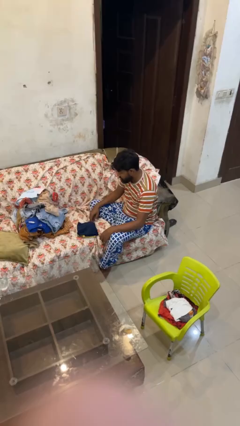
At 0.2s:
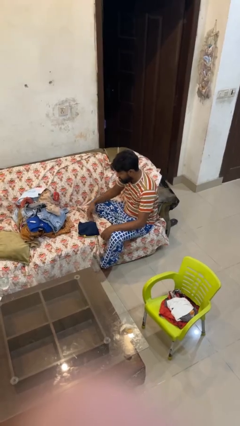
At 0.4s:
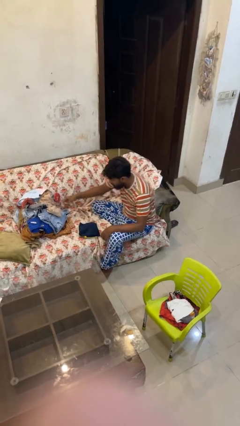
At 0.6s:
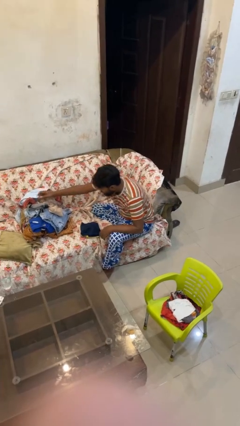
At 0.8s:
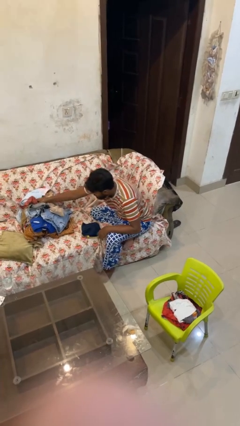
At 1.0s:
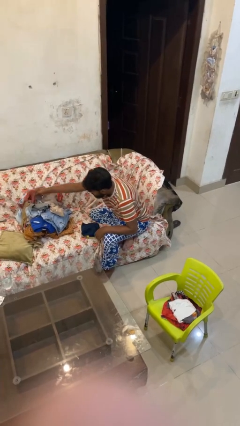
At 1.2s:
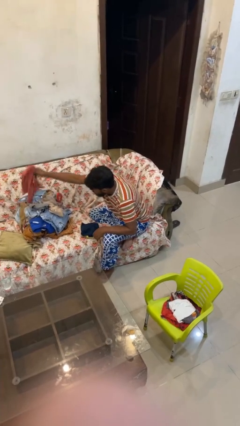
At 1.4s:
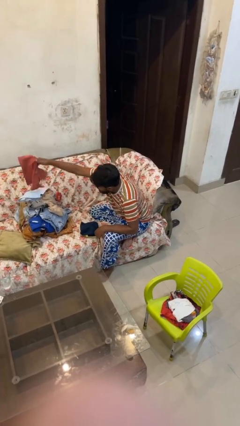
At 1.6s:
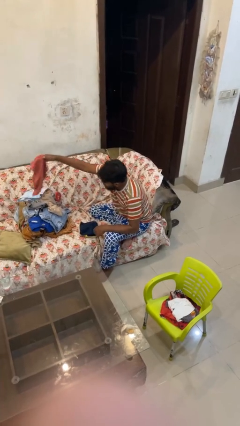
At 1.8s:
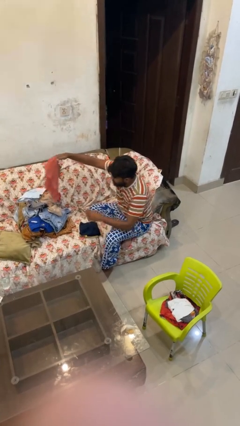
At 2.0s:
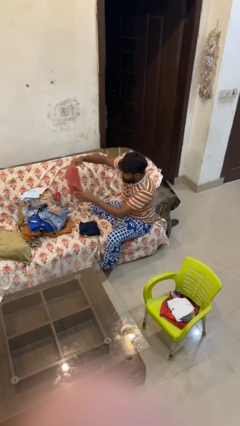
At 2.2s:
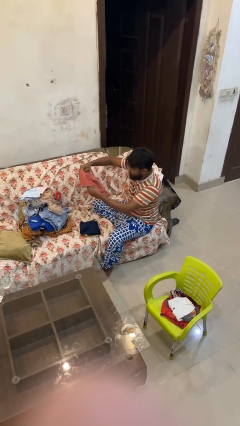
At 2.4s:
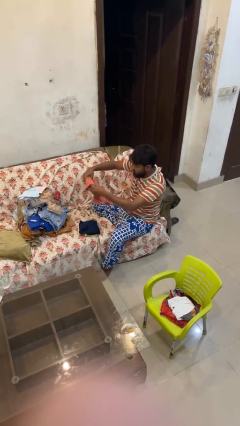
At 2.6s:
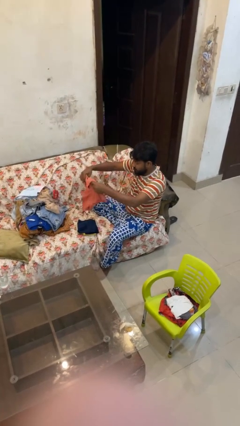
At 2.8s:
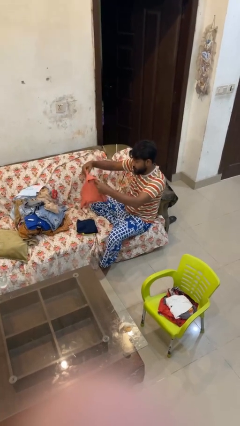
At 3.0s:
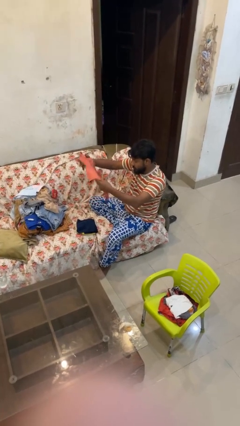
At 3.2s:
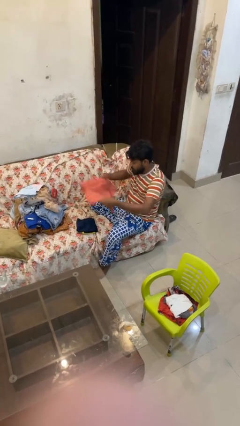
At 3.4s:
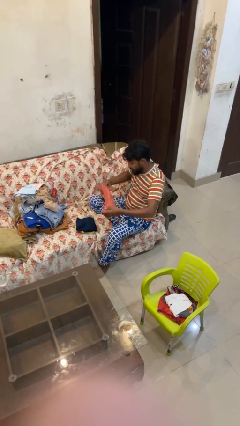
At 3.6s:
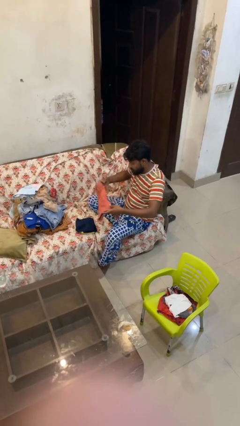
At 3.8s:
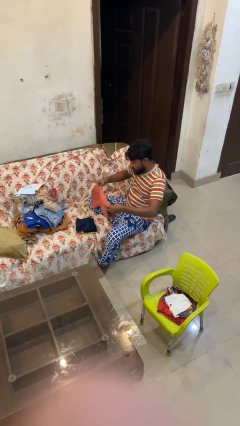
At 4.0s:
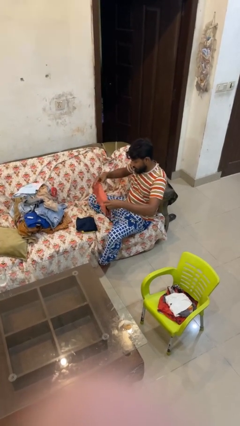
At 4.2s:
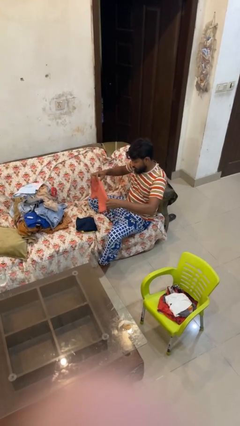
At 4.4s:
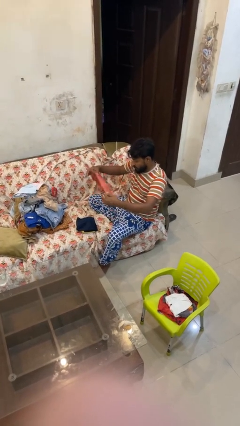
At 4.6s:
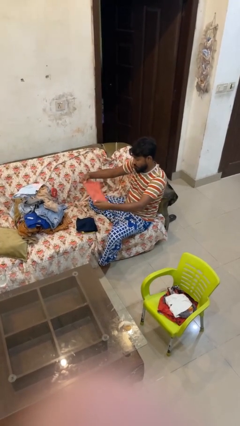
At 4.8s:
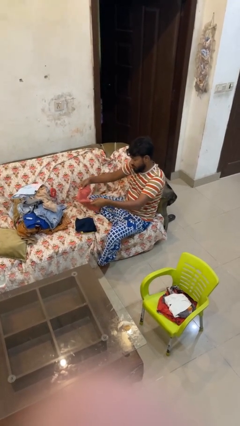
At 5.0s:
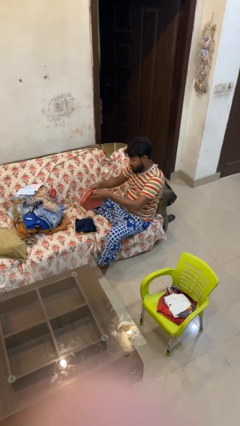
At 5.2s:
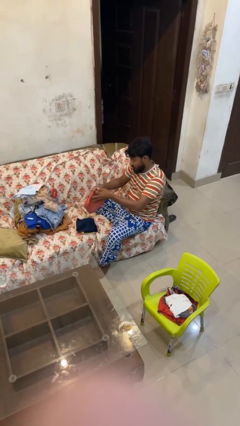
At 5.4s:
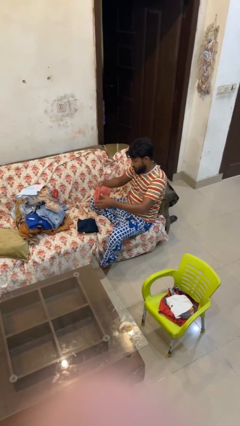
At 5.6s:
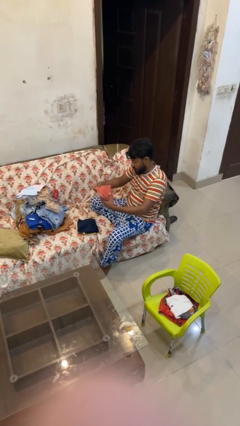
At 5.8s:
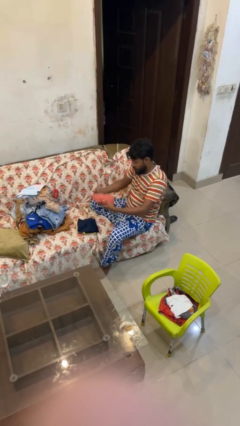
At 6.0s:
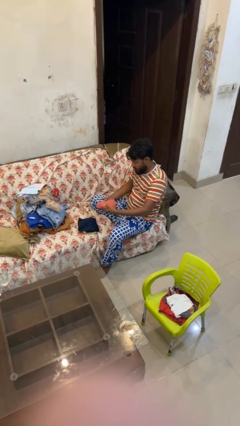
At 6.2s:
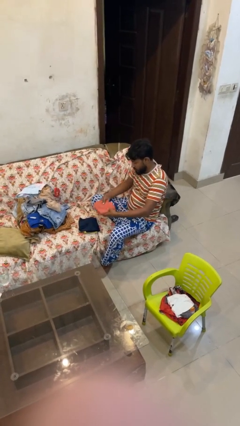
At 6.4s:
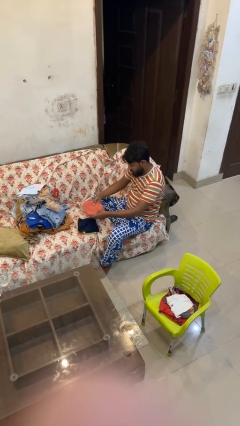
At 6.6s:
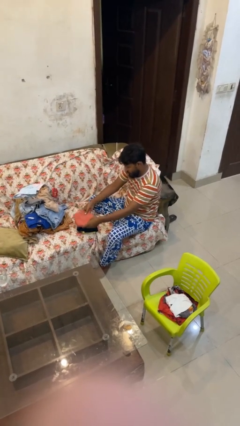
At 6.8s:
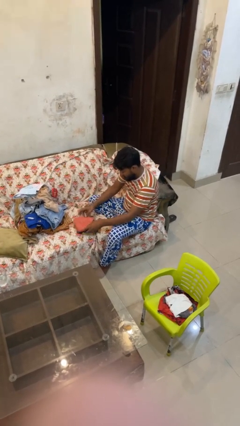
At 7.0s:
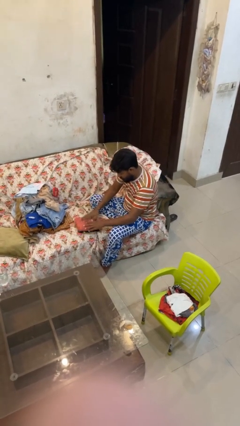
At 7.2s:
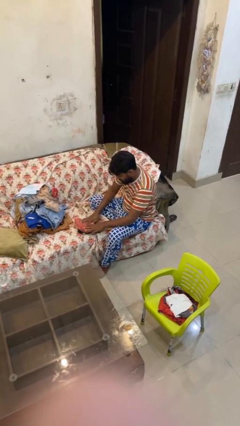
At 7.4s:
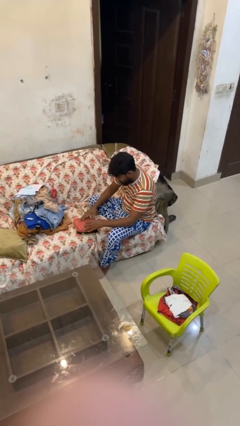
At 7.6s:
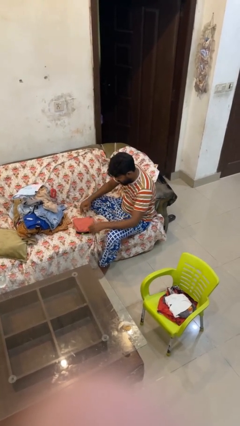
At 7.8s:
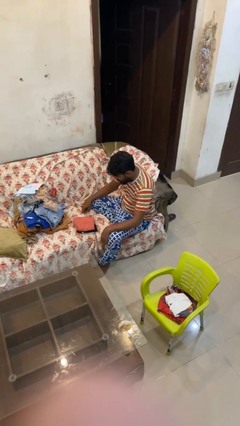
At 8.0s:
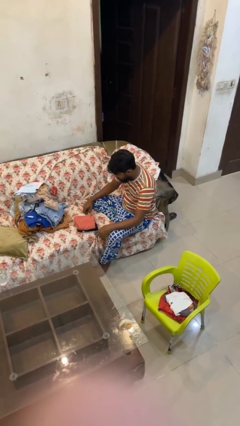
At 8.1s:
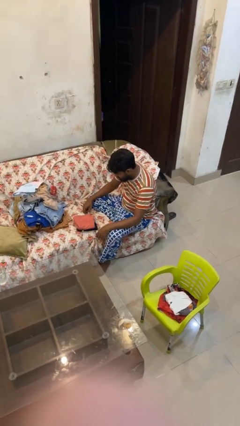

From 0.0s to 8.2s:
person folds shirt

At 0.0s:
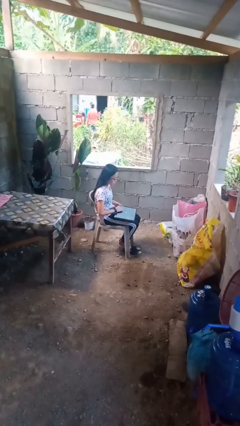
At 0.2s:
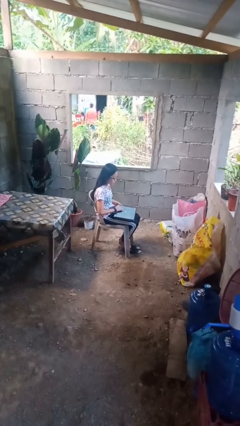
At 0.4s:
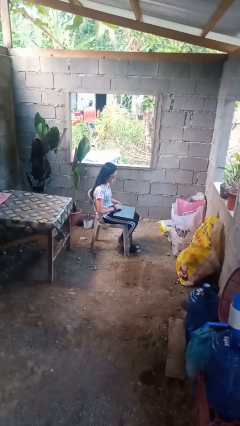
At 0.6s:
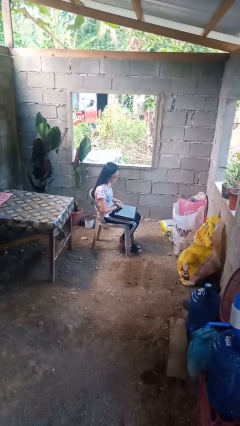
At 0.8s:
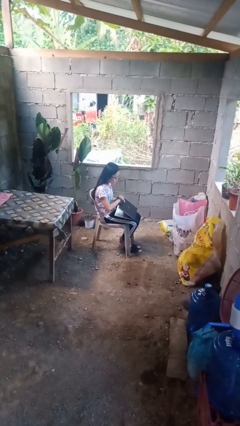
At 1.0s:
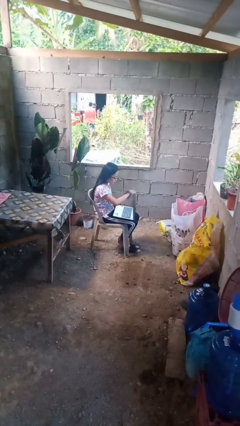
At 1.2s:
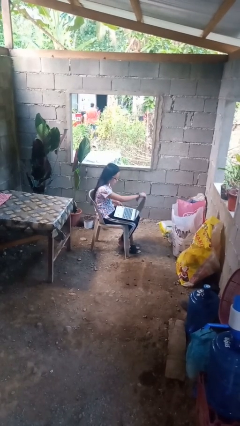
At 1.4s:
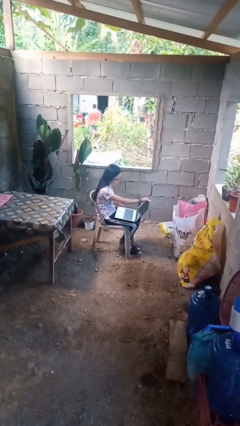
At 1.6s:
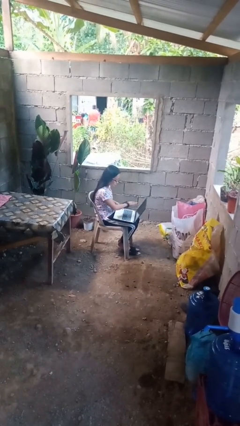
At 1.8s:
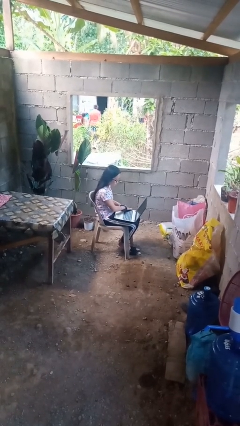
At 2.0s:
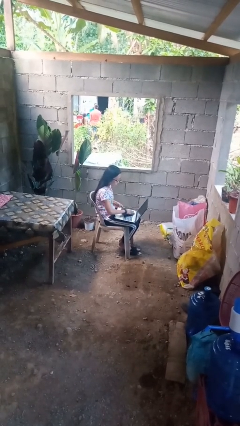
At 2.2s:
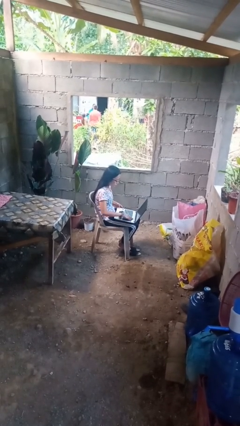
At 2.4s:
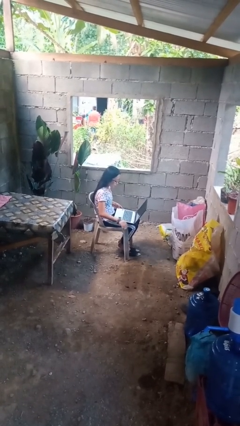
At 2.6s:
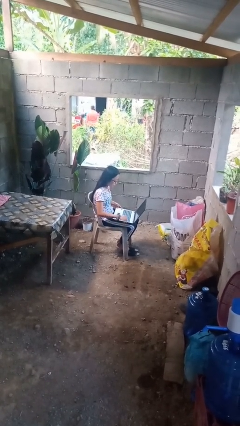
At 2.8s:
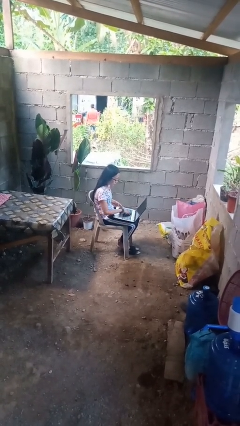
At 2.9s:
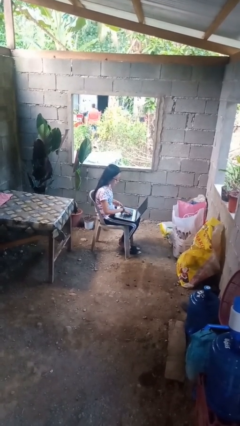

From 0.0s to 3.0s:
person opens laptop

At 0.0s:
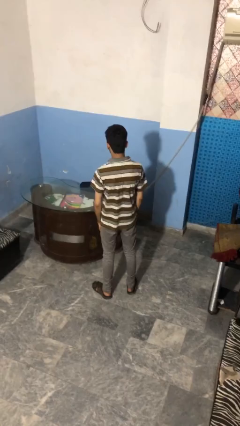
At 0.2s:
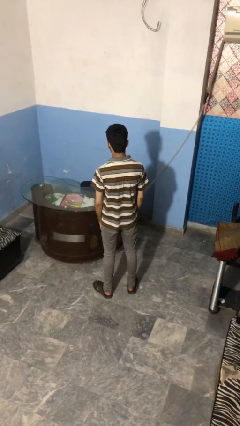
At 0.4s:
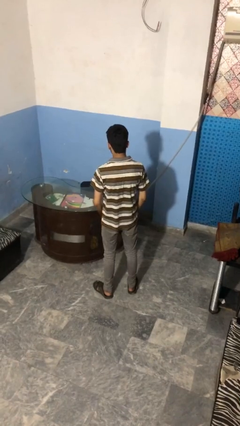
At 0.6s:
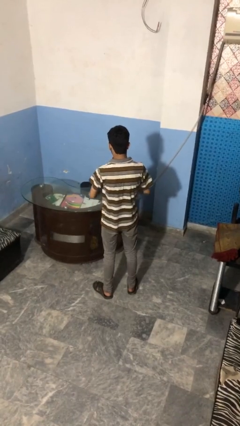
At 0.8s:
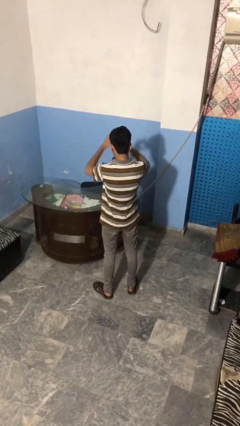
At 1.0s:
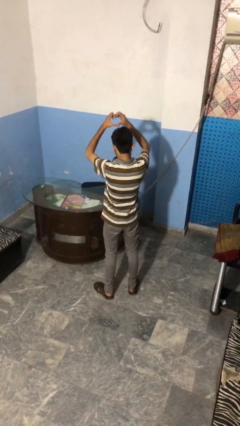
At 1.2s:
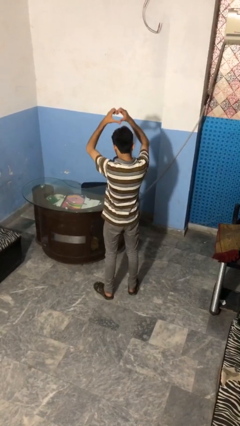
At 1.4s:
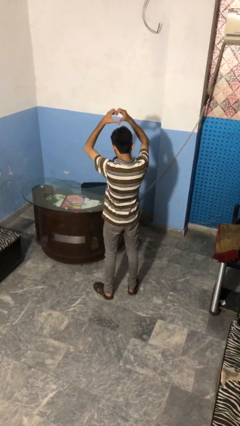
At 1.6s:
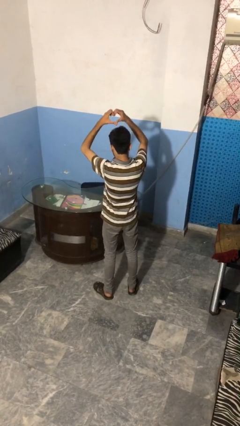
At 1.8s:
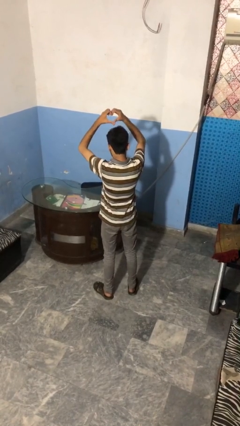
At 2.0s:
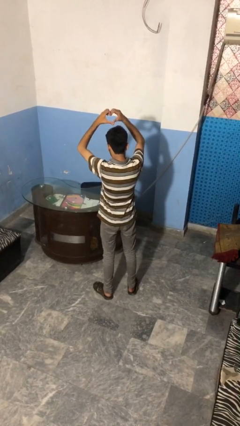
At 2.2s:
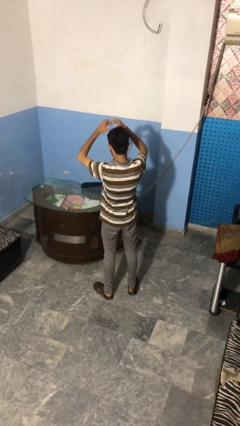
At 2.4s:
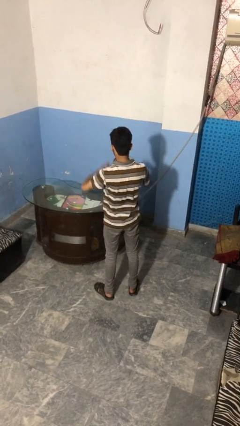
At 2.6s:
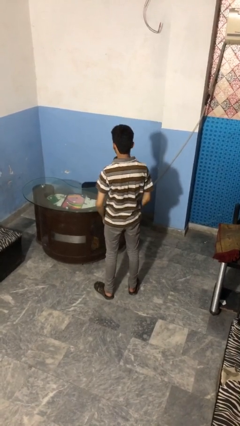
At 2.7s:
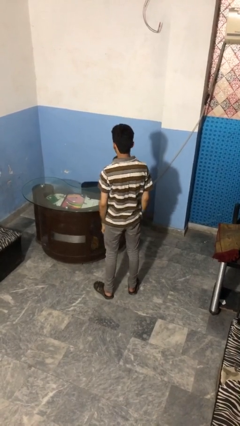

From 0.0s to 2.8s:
person gestures heart

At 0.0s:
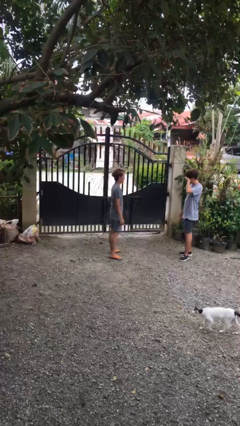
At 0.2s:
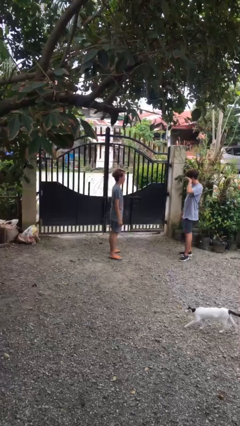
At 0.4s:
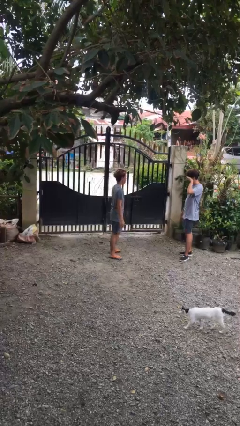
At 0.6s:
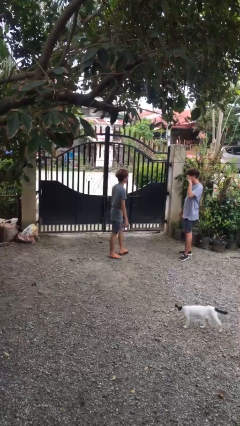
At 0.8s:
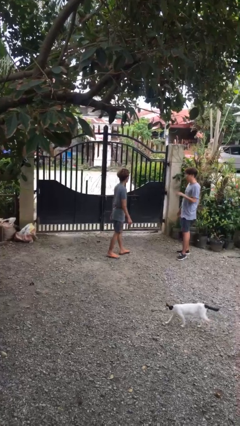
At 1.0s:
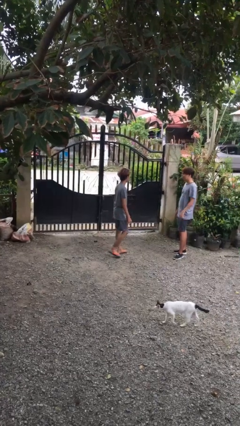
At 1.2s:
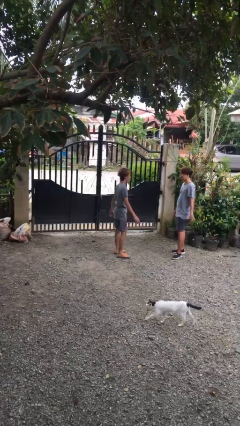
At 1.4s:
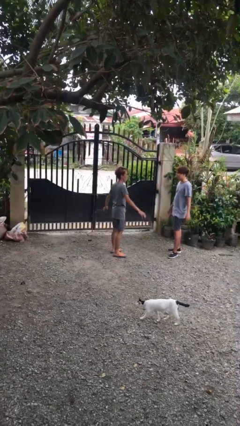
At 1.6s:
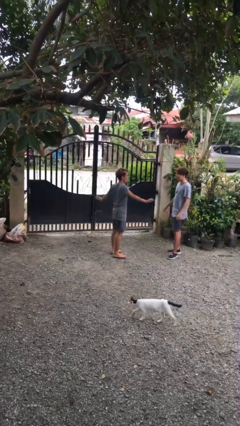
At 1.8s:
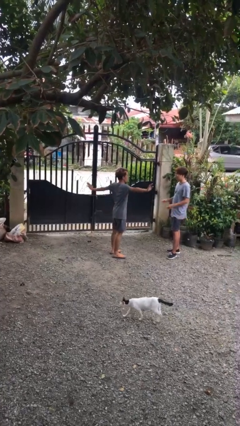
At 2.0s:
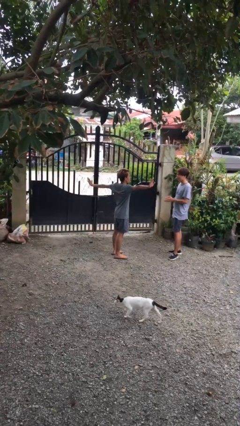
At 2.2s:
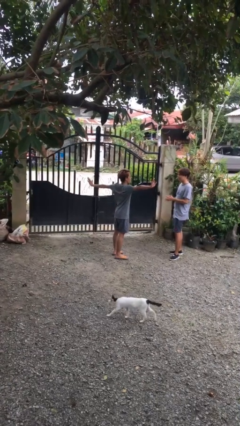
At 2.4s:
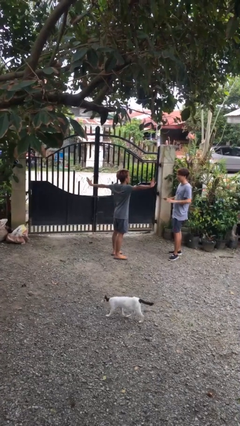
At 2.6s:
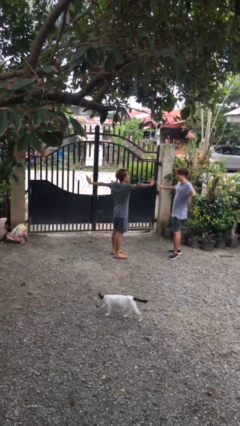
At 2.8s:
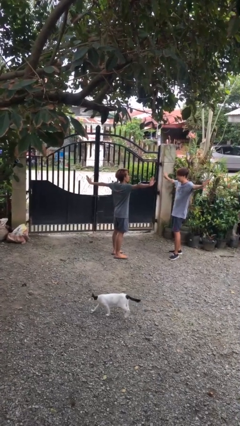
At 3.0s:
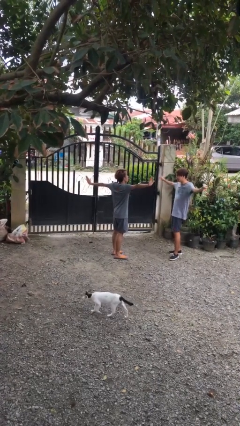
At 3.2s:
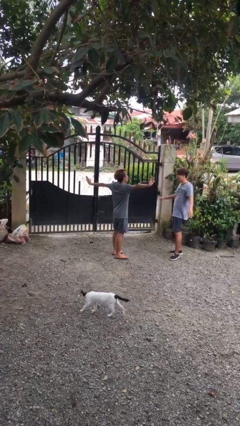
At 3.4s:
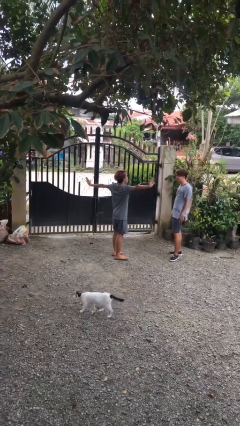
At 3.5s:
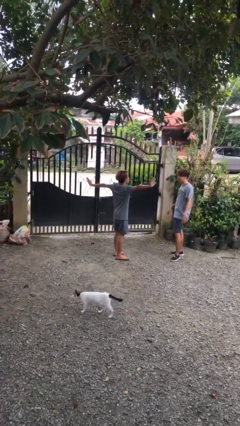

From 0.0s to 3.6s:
person talks to person

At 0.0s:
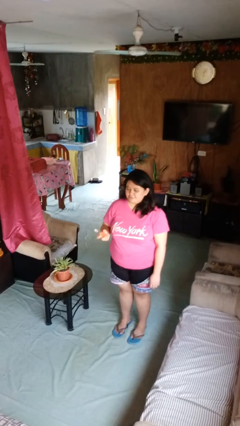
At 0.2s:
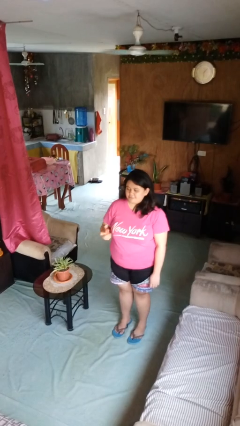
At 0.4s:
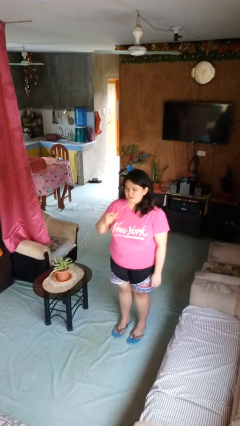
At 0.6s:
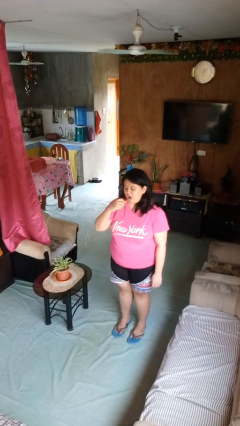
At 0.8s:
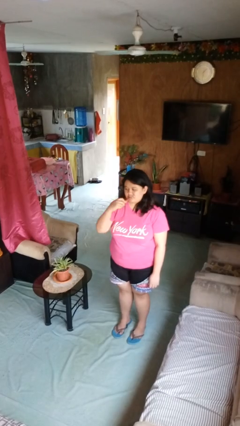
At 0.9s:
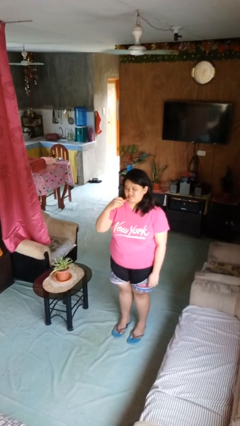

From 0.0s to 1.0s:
person brushes teeth
